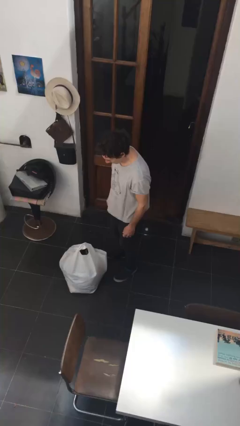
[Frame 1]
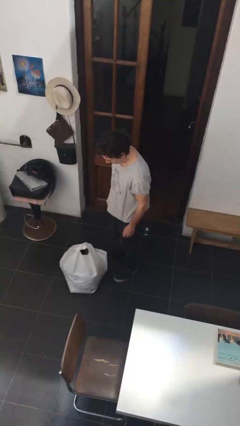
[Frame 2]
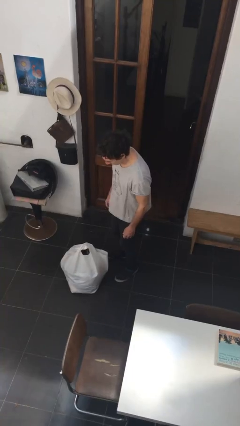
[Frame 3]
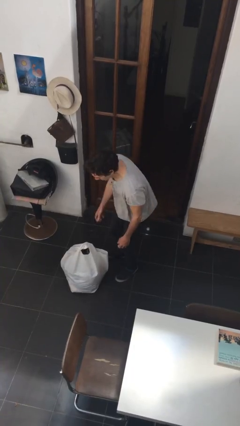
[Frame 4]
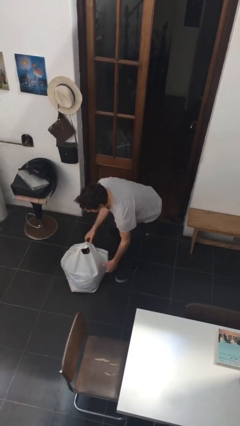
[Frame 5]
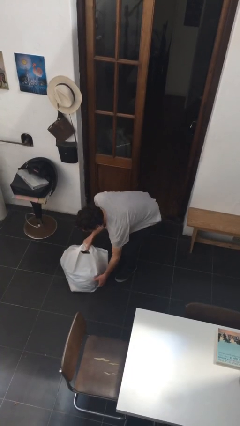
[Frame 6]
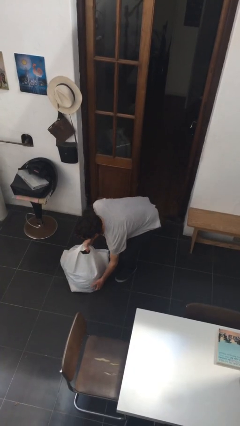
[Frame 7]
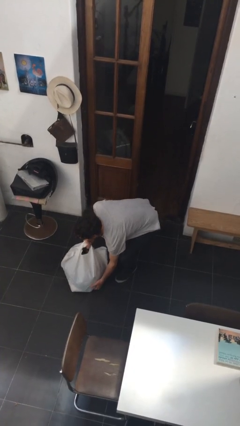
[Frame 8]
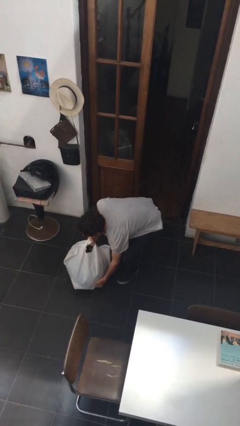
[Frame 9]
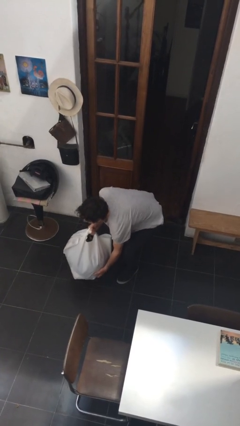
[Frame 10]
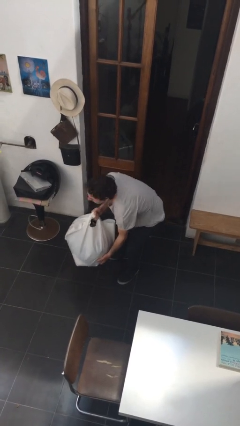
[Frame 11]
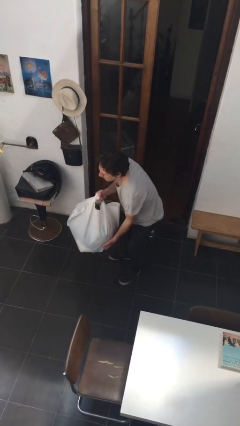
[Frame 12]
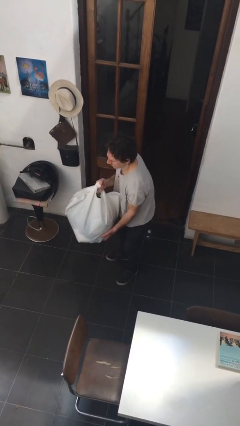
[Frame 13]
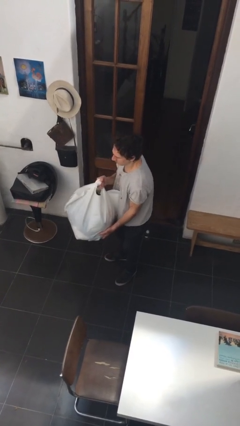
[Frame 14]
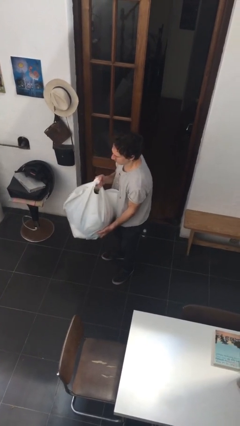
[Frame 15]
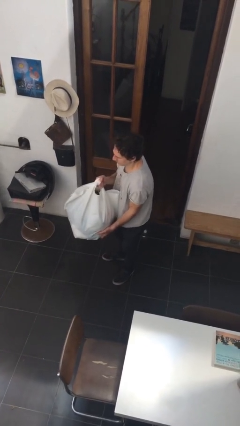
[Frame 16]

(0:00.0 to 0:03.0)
person picks up object from floor

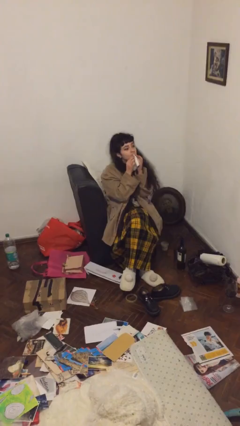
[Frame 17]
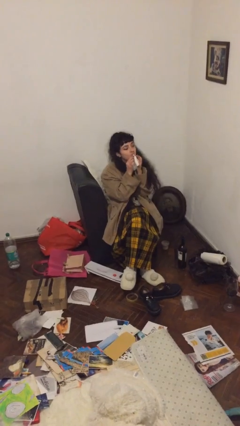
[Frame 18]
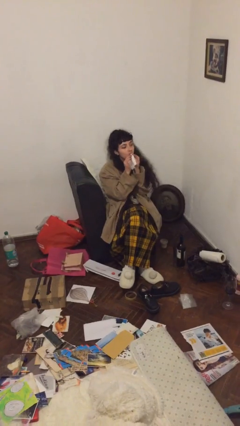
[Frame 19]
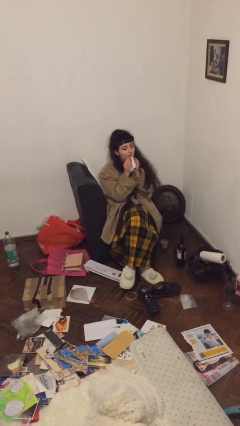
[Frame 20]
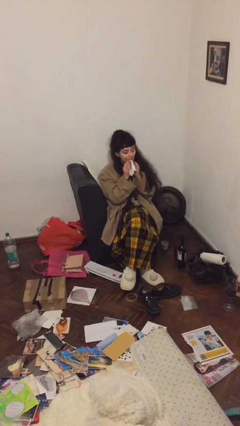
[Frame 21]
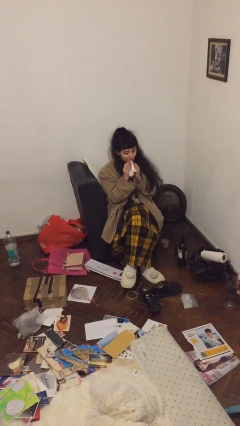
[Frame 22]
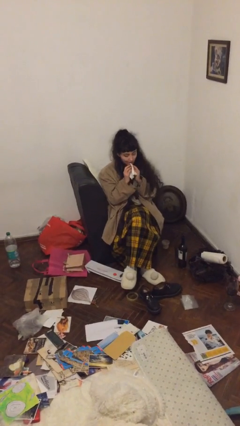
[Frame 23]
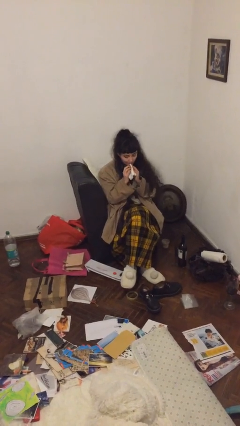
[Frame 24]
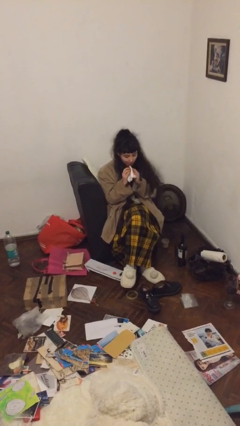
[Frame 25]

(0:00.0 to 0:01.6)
person wipes mouth with napkin

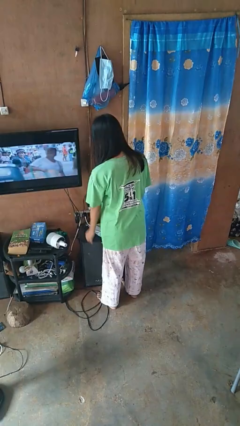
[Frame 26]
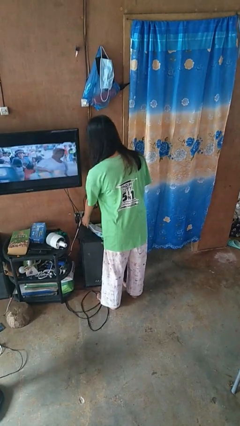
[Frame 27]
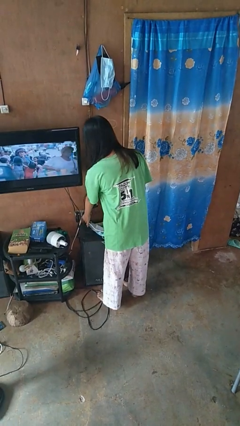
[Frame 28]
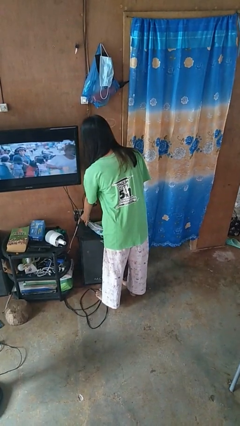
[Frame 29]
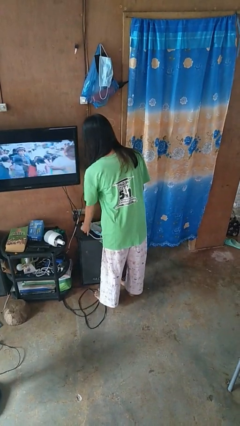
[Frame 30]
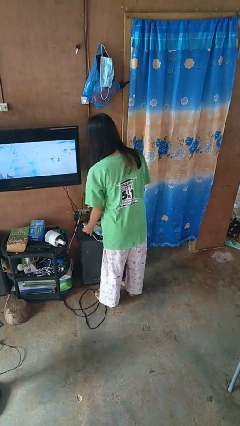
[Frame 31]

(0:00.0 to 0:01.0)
person unplugs from electrical socket

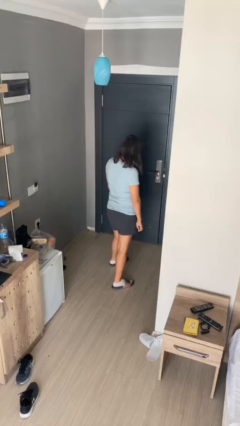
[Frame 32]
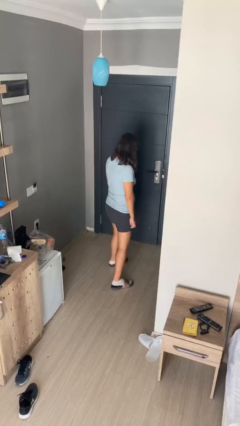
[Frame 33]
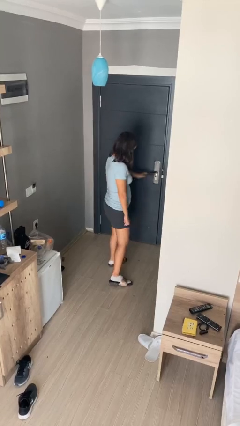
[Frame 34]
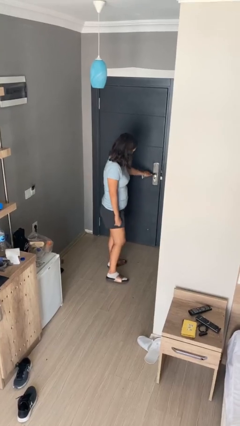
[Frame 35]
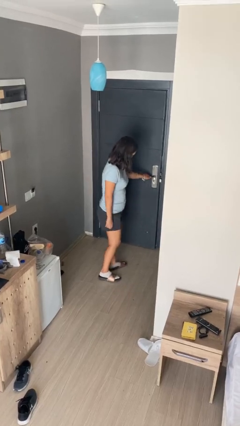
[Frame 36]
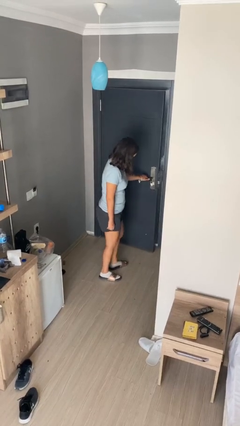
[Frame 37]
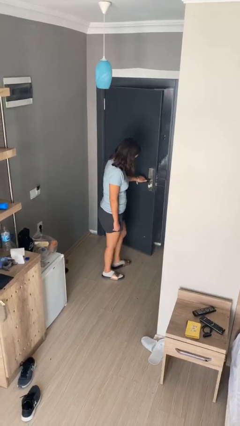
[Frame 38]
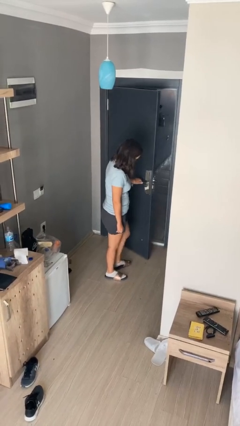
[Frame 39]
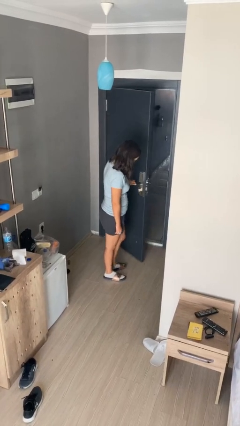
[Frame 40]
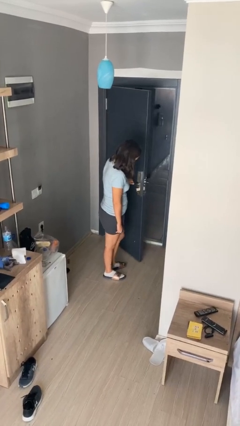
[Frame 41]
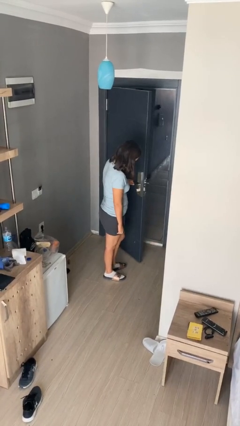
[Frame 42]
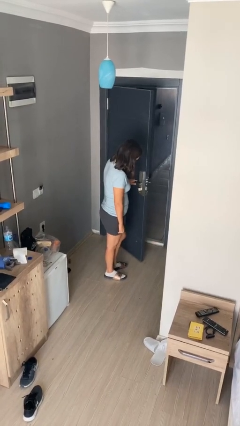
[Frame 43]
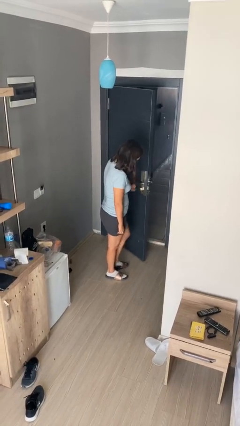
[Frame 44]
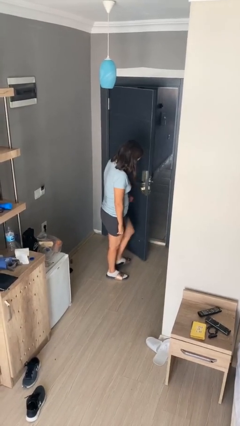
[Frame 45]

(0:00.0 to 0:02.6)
person opens facility door

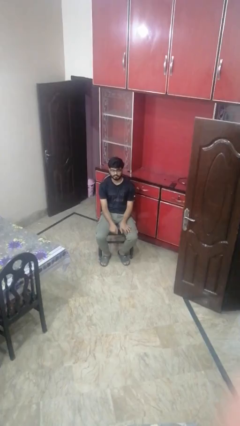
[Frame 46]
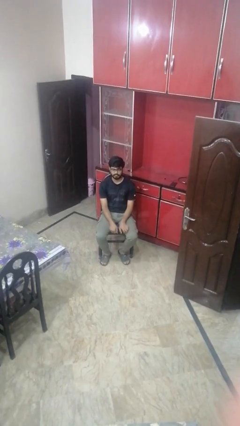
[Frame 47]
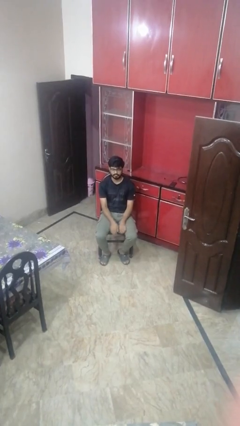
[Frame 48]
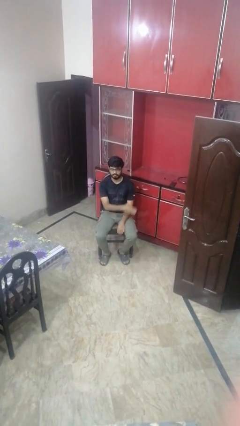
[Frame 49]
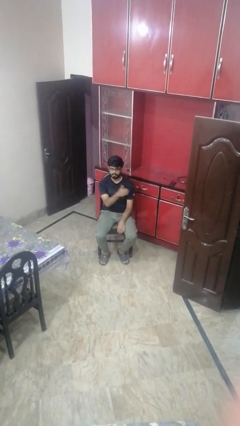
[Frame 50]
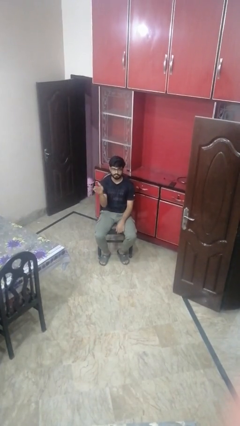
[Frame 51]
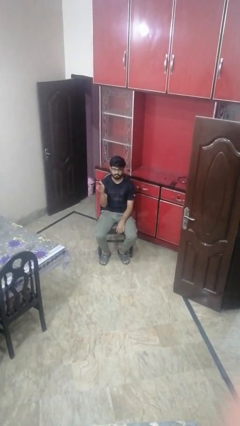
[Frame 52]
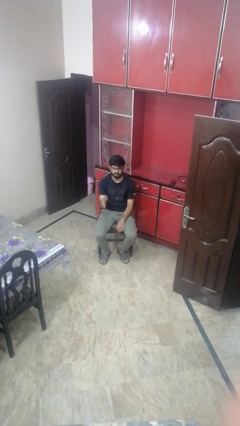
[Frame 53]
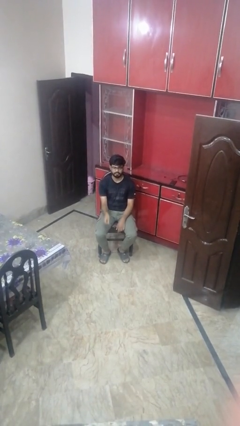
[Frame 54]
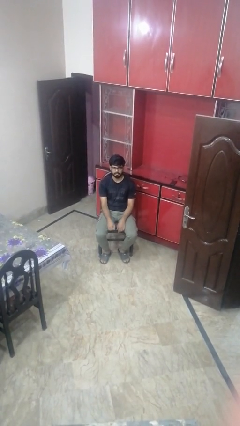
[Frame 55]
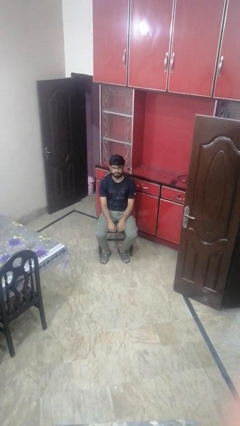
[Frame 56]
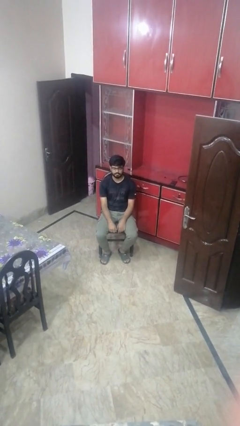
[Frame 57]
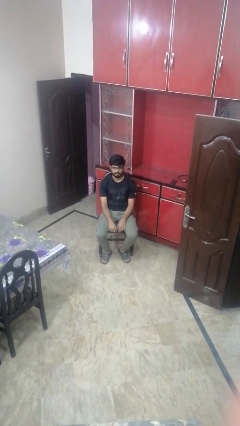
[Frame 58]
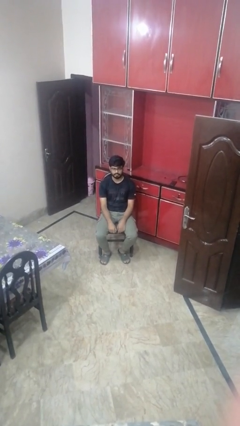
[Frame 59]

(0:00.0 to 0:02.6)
person gestures swipe right

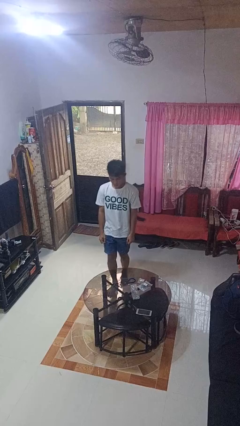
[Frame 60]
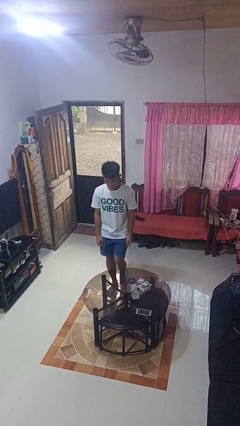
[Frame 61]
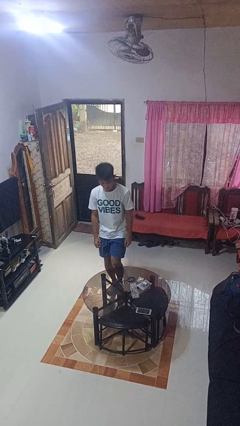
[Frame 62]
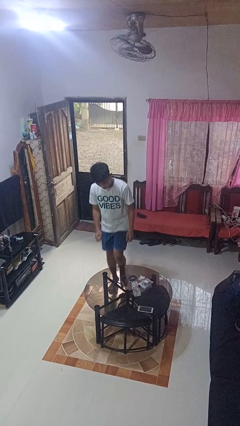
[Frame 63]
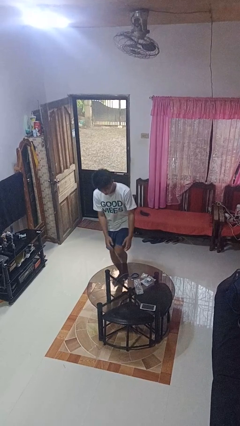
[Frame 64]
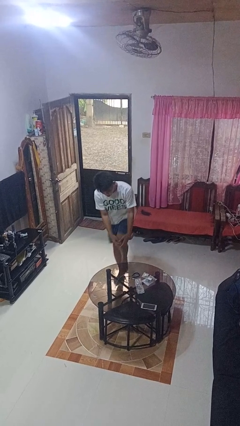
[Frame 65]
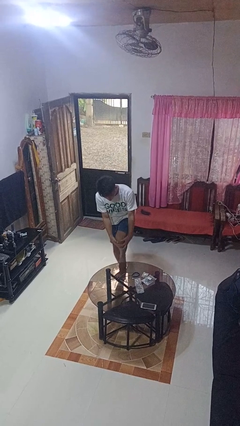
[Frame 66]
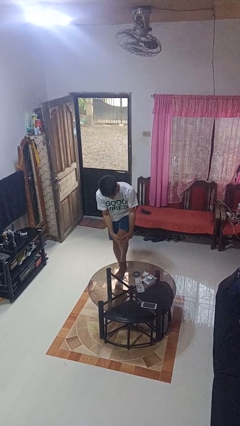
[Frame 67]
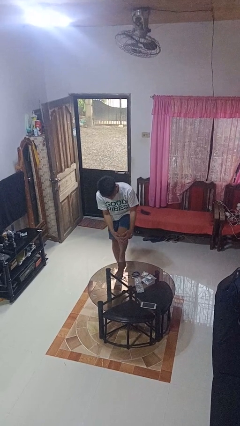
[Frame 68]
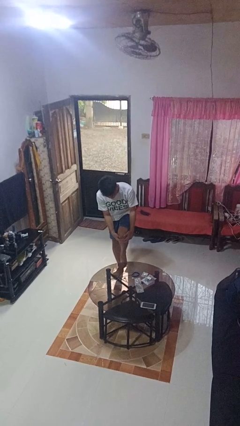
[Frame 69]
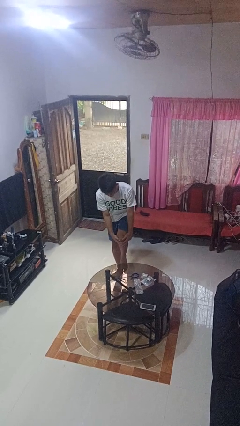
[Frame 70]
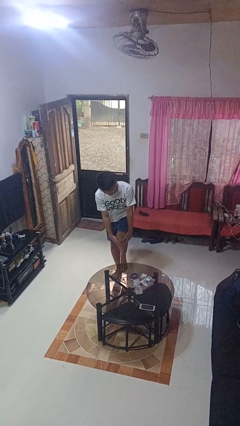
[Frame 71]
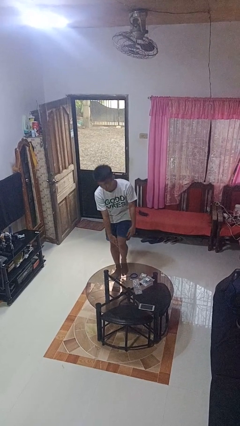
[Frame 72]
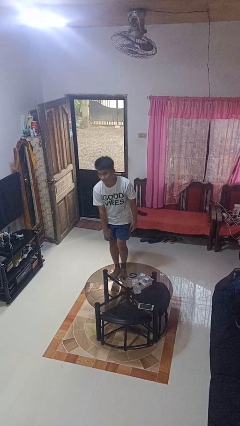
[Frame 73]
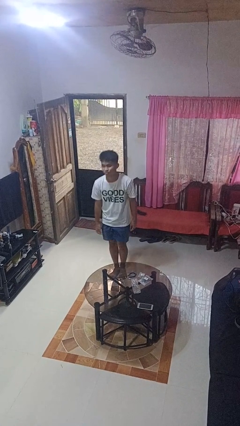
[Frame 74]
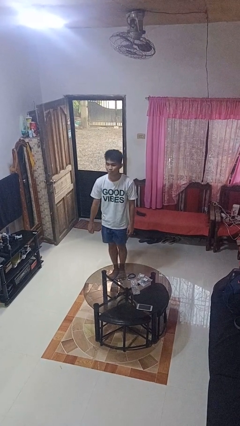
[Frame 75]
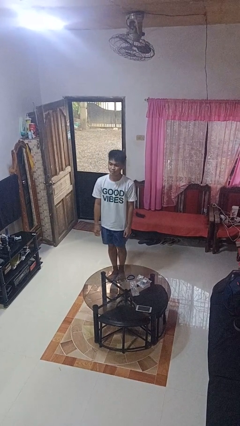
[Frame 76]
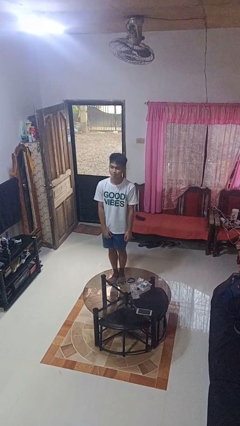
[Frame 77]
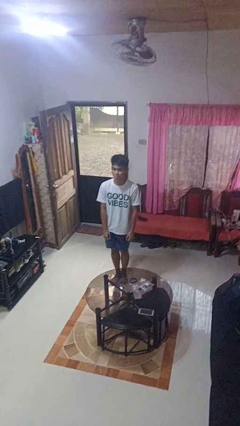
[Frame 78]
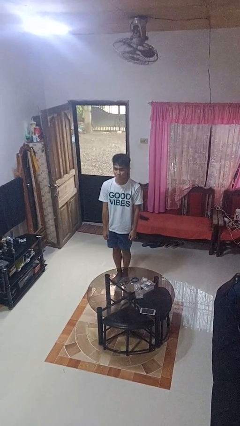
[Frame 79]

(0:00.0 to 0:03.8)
person bumps into table

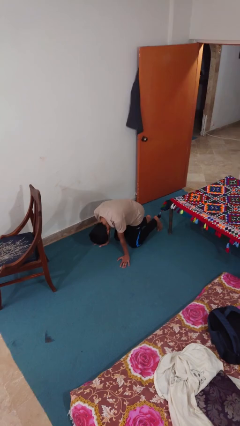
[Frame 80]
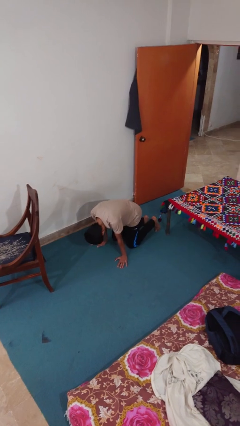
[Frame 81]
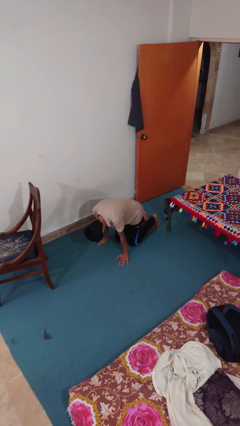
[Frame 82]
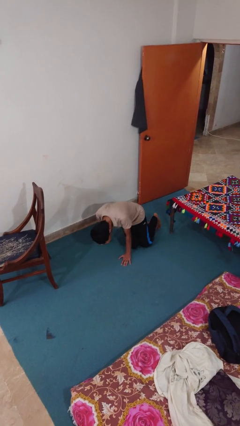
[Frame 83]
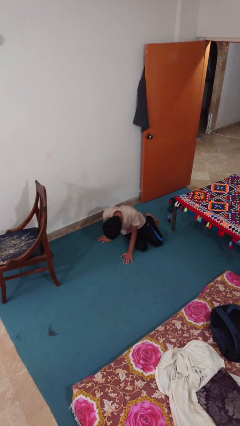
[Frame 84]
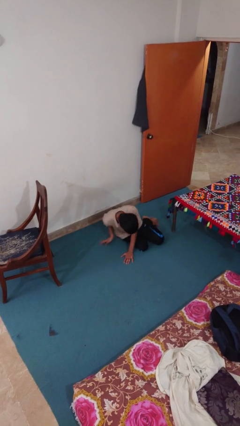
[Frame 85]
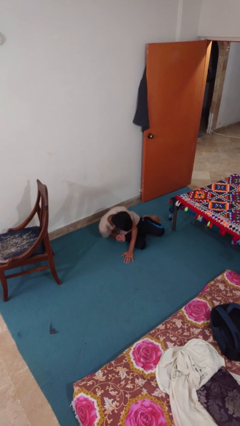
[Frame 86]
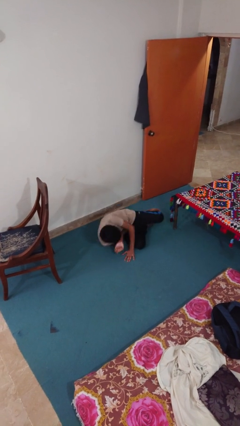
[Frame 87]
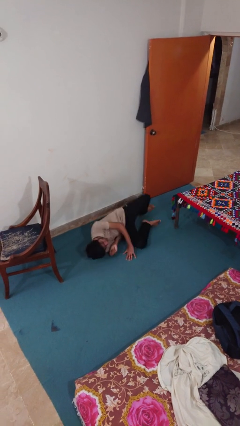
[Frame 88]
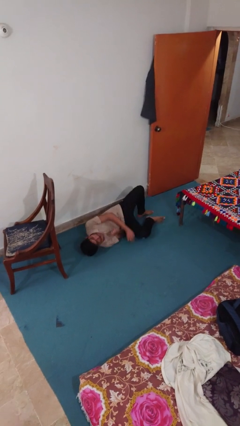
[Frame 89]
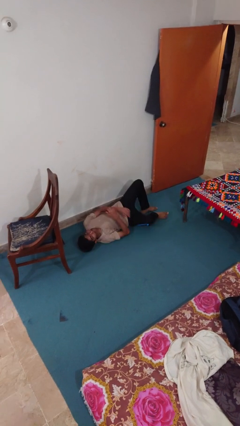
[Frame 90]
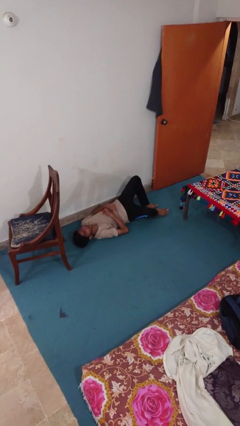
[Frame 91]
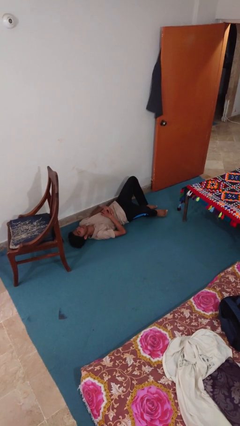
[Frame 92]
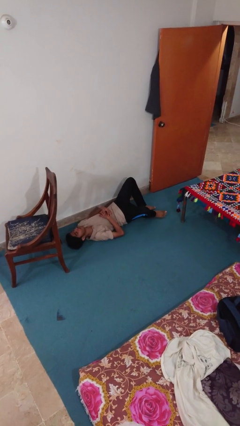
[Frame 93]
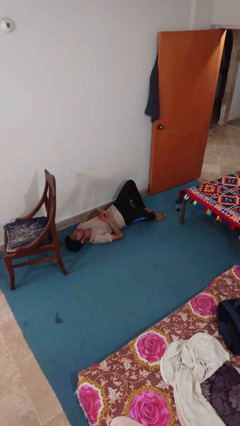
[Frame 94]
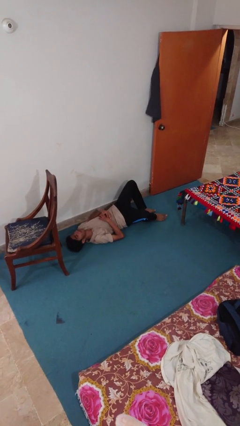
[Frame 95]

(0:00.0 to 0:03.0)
person lies down on floor
